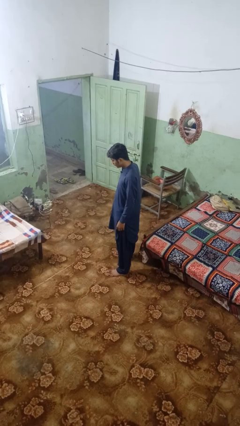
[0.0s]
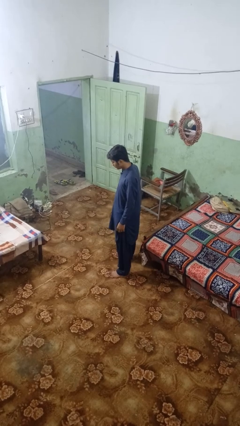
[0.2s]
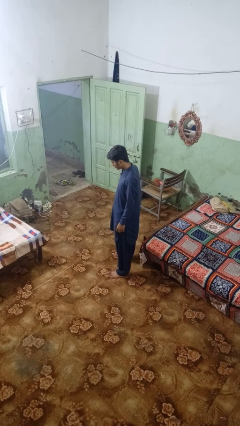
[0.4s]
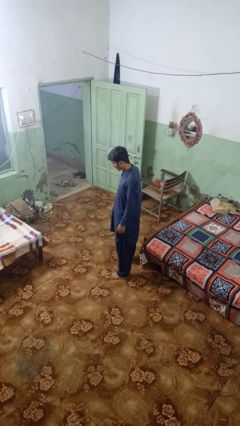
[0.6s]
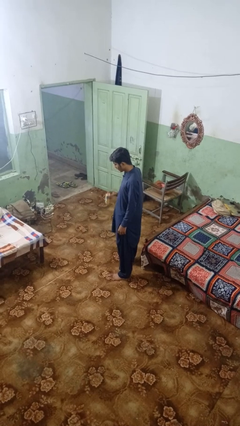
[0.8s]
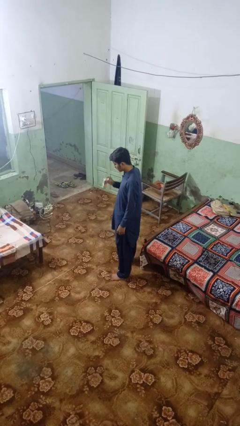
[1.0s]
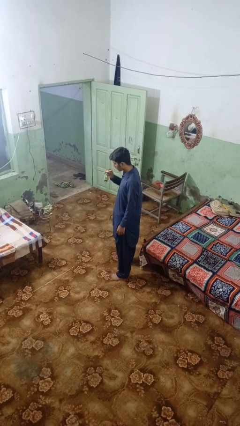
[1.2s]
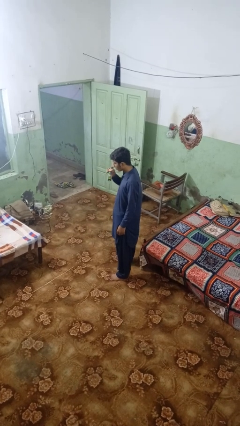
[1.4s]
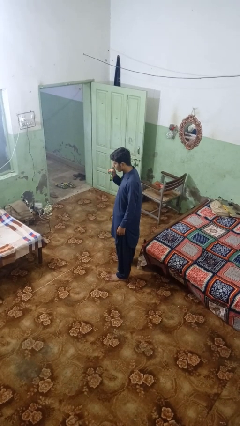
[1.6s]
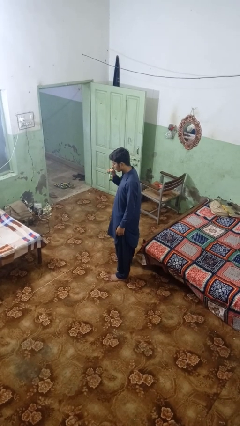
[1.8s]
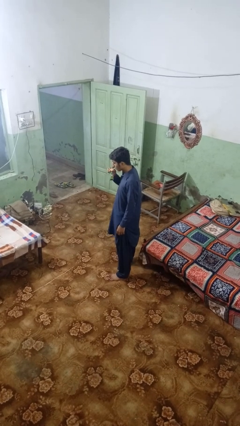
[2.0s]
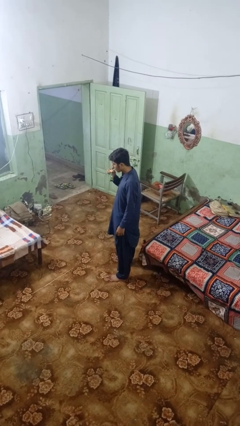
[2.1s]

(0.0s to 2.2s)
person drinks from straw

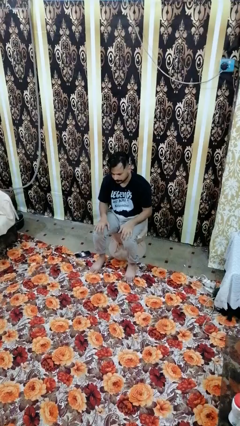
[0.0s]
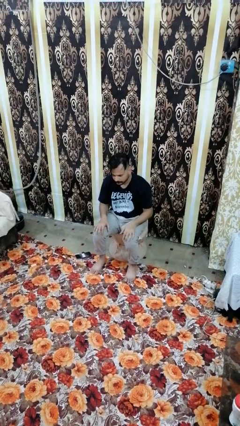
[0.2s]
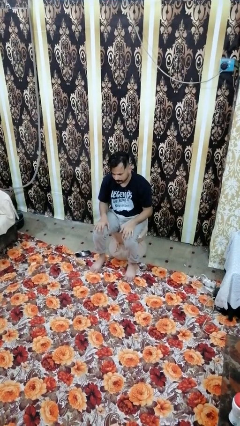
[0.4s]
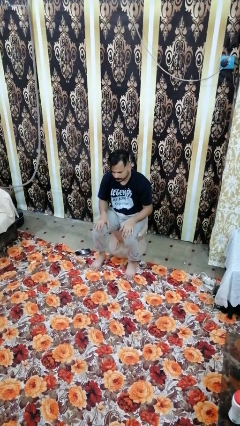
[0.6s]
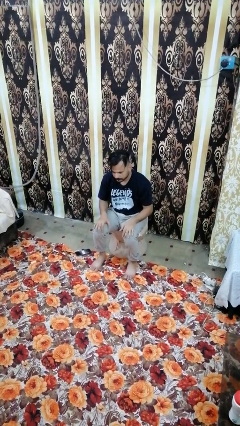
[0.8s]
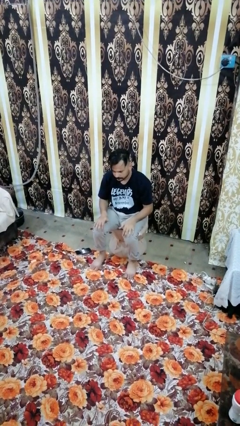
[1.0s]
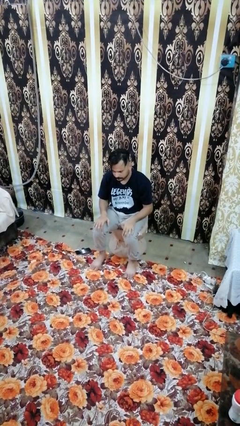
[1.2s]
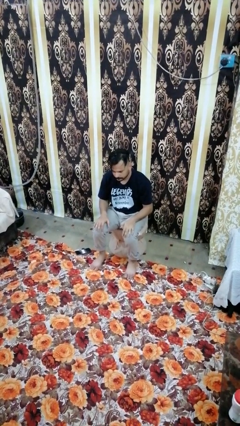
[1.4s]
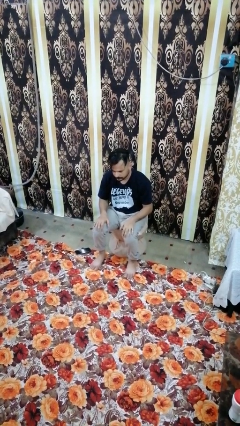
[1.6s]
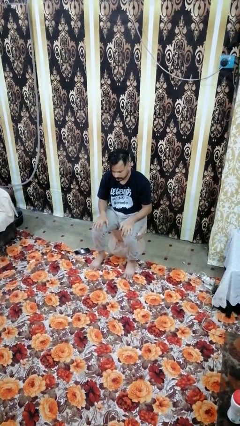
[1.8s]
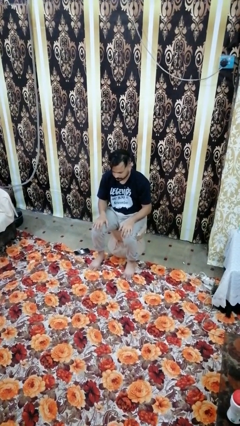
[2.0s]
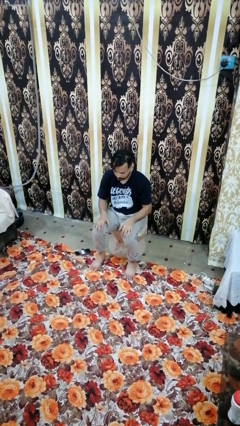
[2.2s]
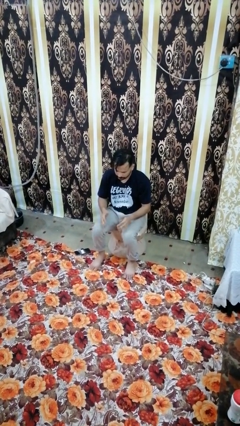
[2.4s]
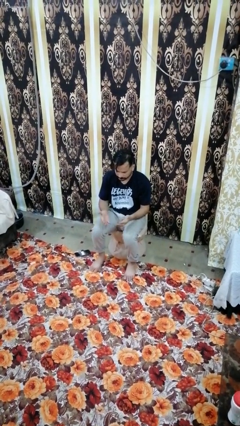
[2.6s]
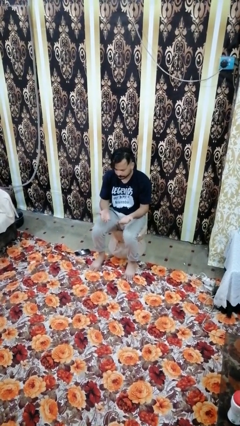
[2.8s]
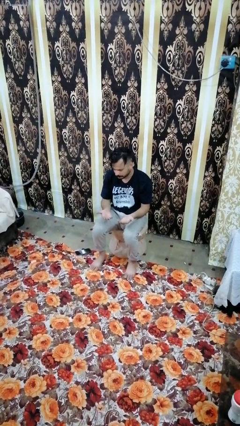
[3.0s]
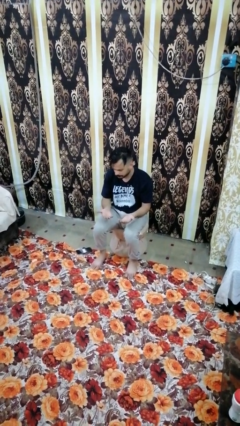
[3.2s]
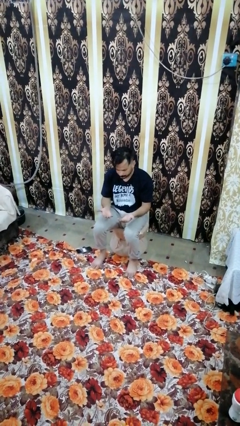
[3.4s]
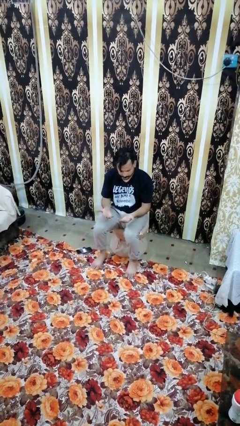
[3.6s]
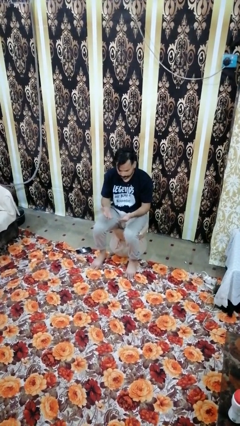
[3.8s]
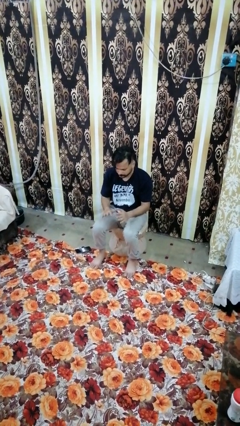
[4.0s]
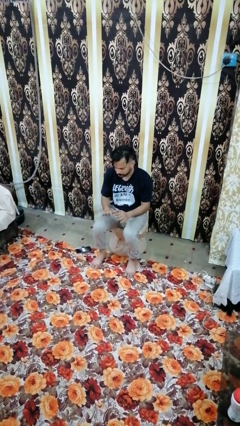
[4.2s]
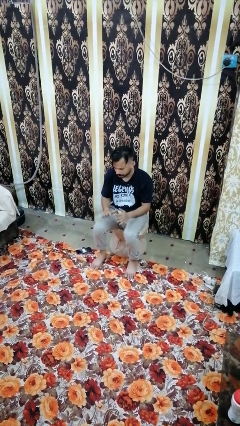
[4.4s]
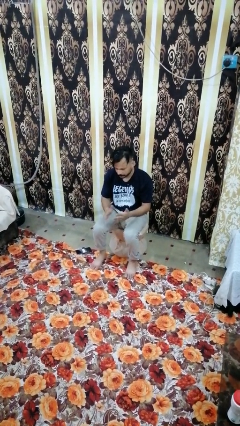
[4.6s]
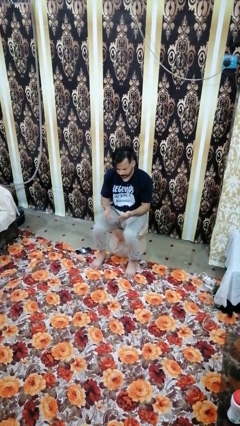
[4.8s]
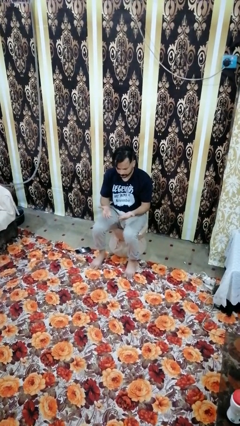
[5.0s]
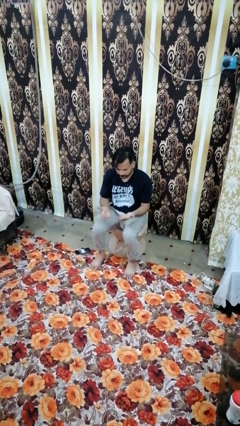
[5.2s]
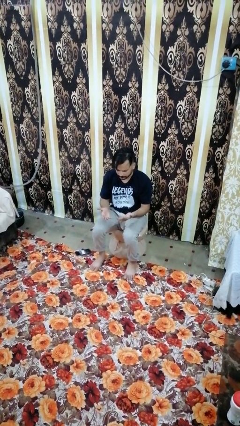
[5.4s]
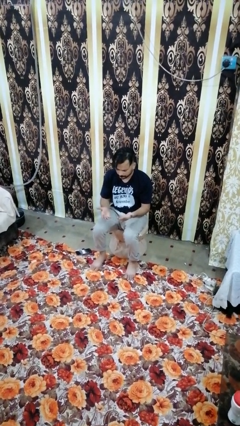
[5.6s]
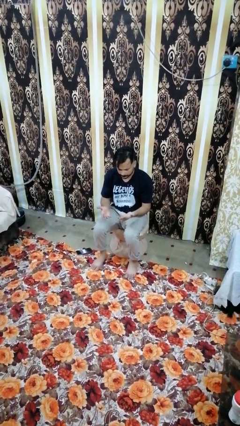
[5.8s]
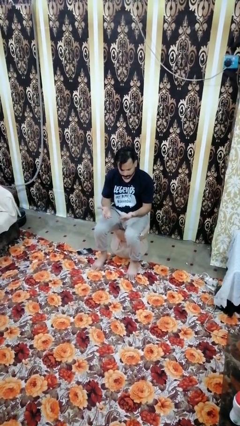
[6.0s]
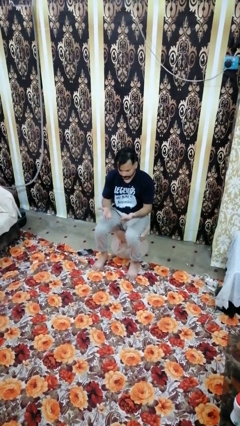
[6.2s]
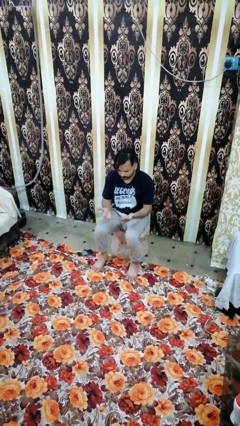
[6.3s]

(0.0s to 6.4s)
person looks at hands in lap

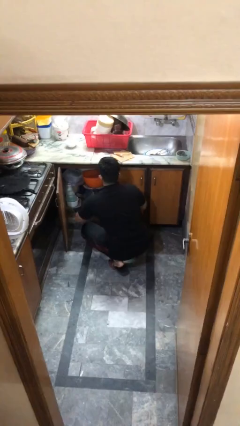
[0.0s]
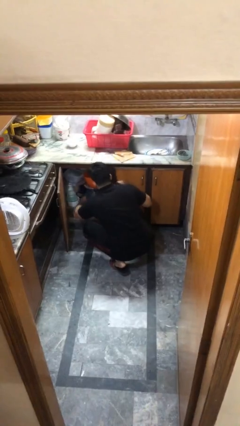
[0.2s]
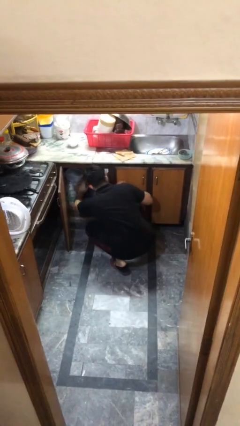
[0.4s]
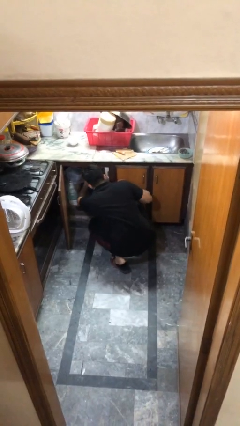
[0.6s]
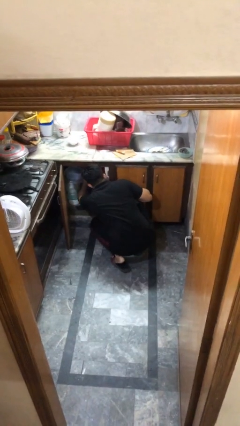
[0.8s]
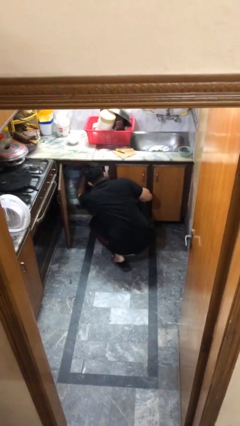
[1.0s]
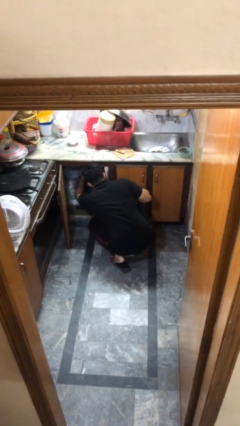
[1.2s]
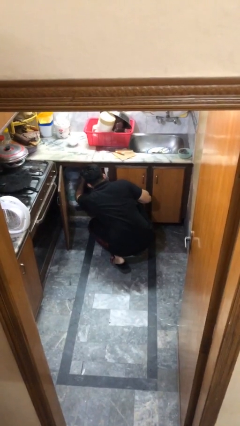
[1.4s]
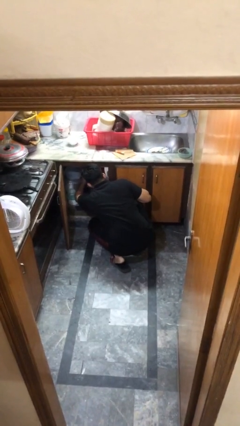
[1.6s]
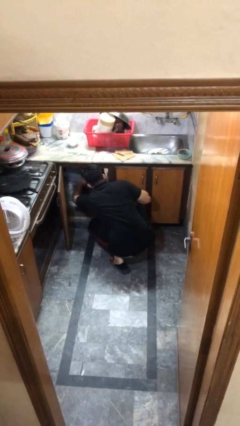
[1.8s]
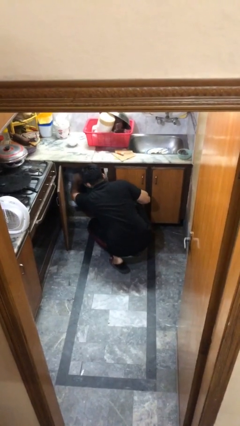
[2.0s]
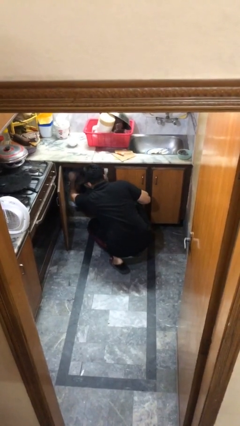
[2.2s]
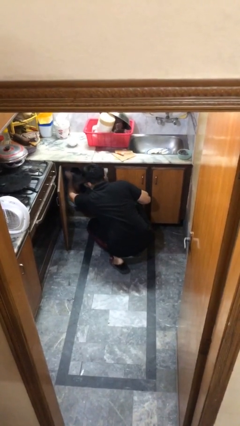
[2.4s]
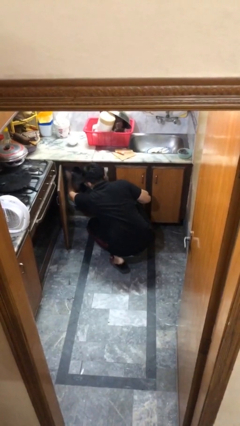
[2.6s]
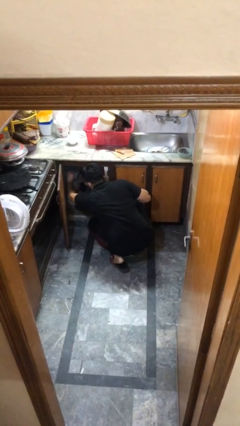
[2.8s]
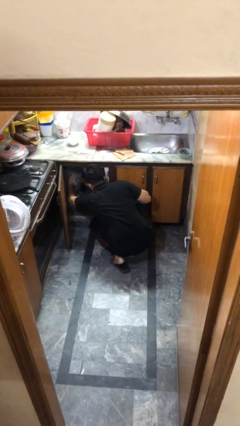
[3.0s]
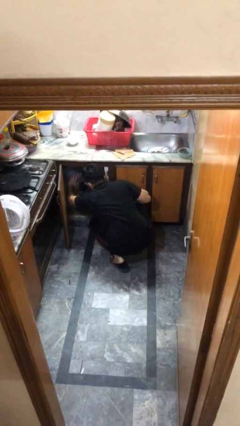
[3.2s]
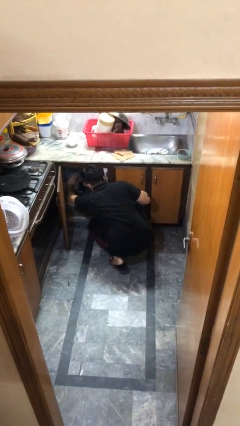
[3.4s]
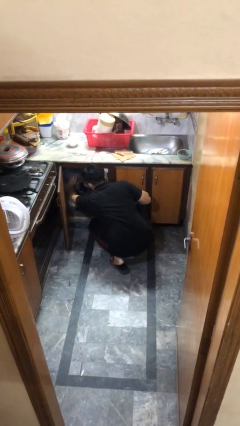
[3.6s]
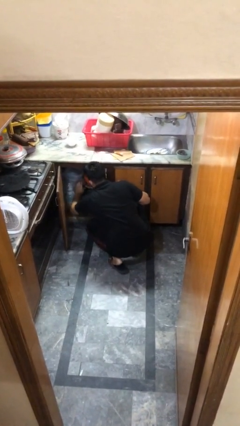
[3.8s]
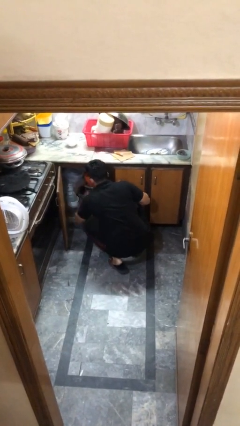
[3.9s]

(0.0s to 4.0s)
person searches in kitchen drawer

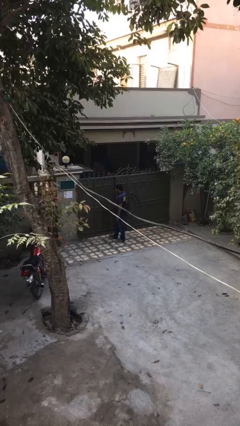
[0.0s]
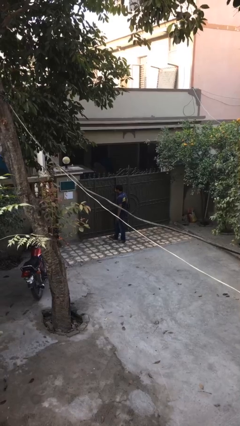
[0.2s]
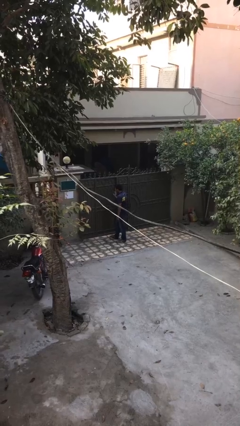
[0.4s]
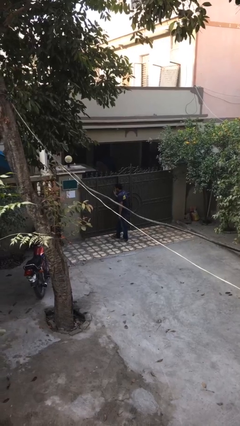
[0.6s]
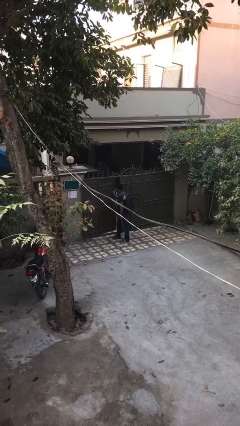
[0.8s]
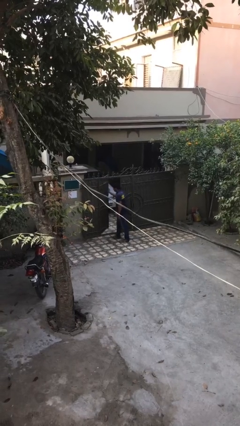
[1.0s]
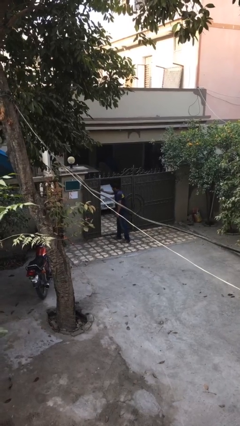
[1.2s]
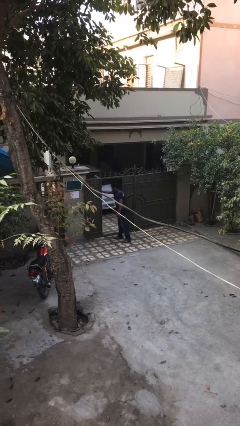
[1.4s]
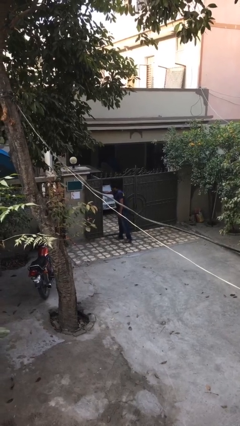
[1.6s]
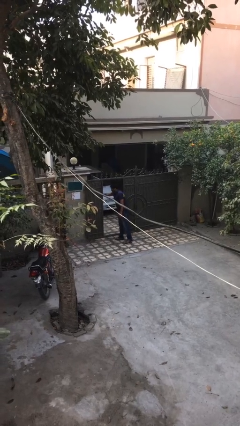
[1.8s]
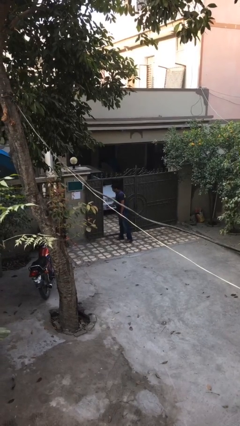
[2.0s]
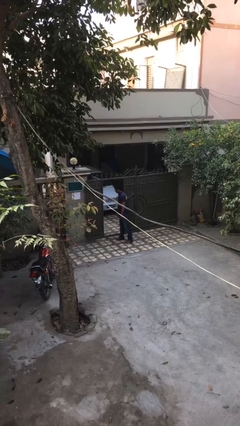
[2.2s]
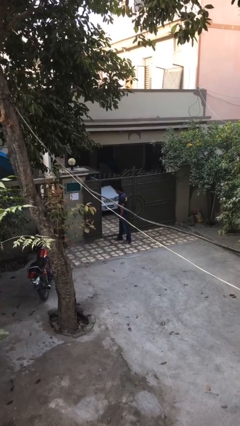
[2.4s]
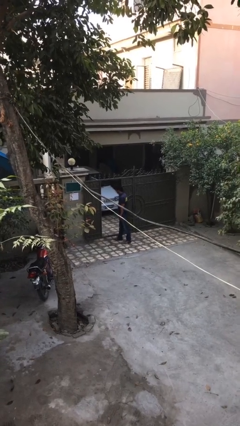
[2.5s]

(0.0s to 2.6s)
person opens facility door

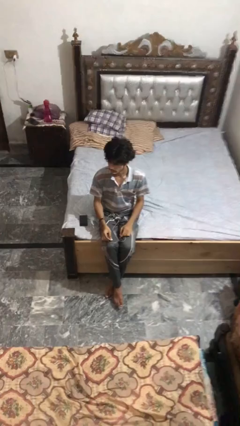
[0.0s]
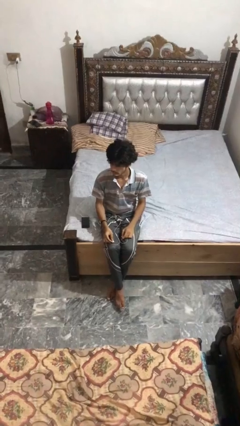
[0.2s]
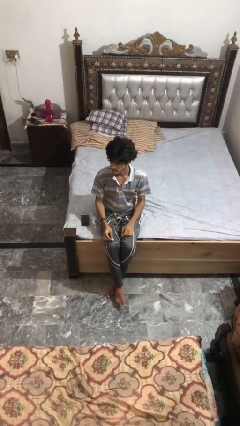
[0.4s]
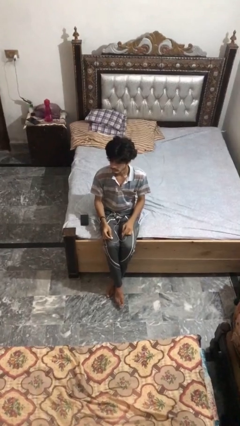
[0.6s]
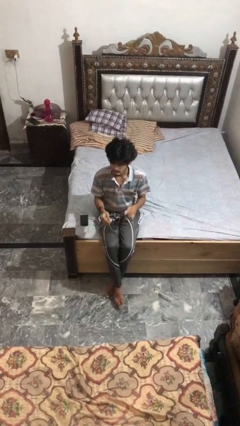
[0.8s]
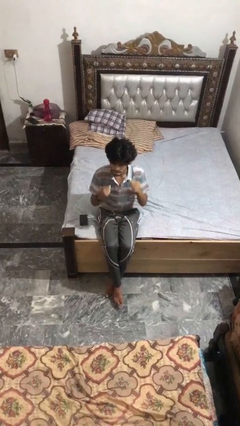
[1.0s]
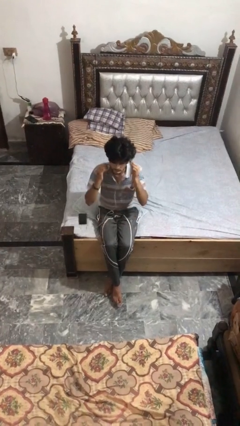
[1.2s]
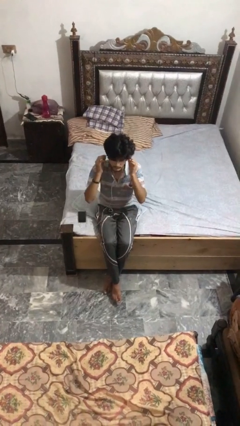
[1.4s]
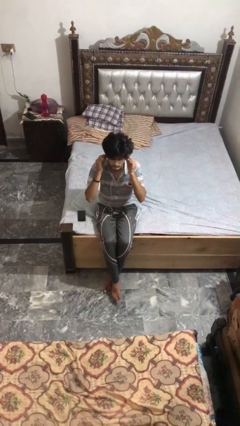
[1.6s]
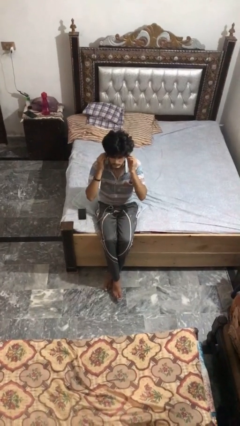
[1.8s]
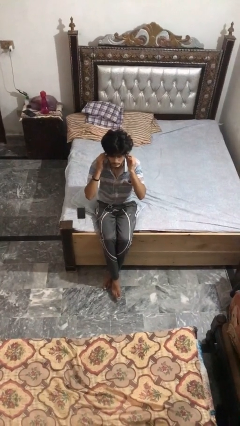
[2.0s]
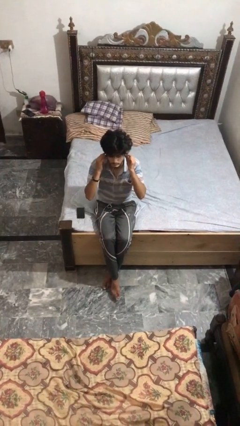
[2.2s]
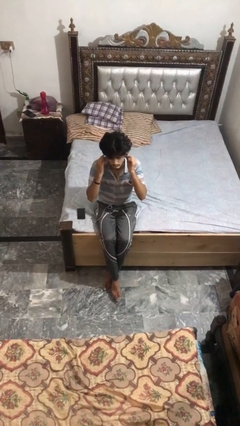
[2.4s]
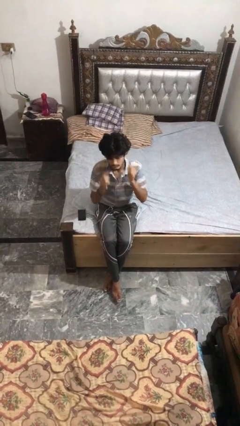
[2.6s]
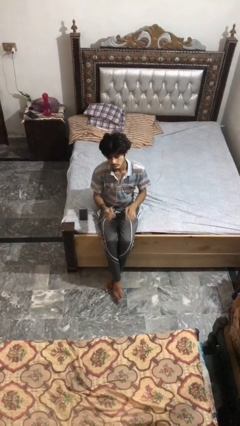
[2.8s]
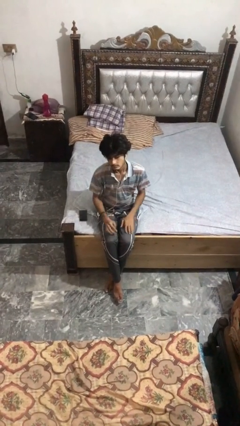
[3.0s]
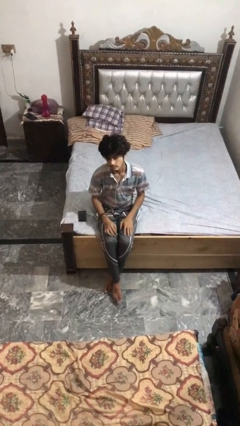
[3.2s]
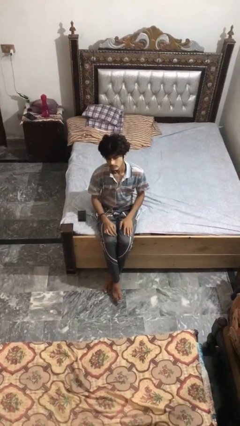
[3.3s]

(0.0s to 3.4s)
person puts on headphones
